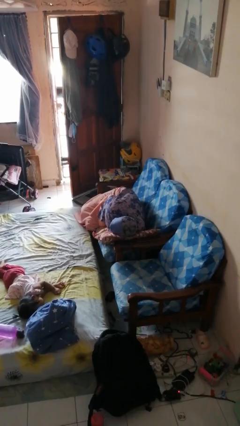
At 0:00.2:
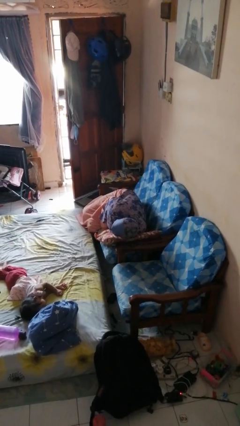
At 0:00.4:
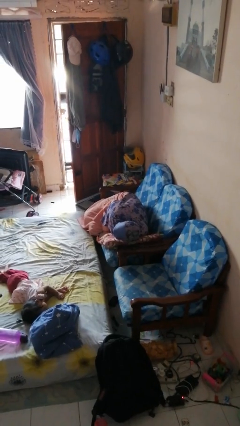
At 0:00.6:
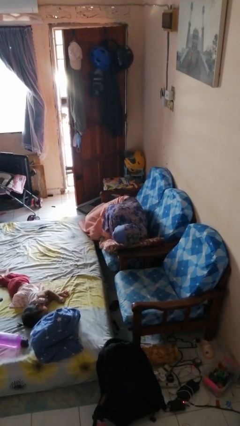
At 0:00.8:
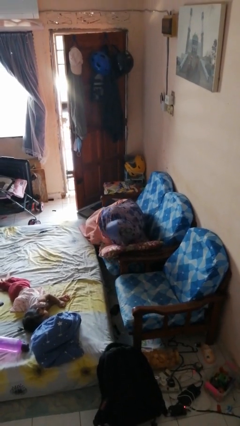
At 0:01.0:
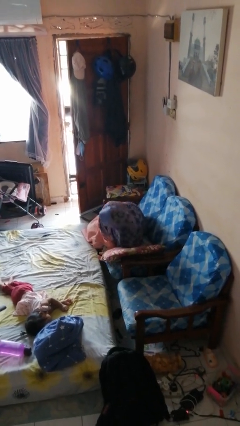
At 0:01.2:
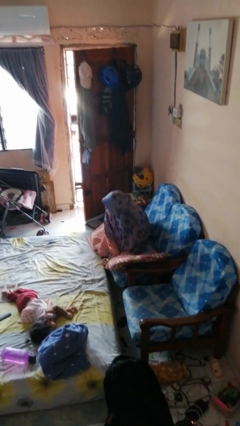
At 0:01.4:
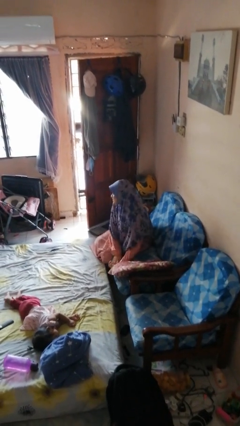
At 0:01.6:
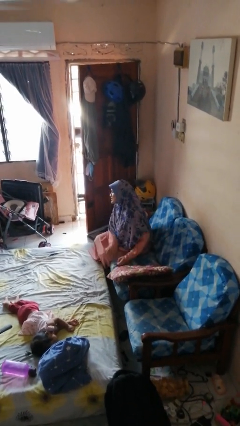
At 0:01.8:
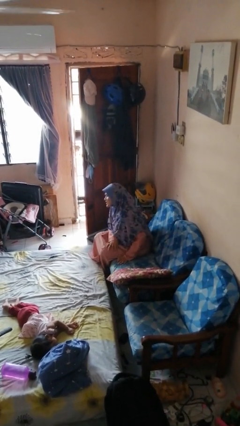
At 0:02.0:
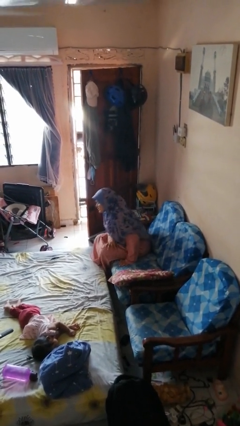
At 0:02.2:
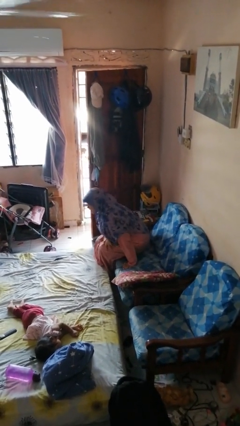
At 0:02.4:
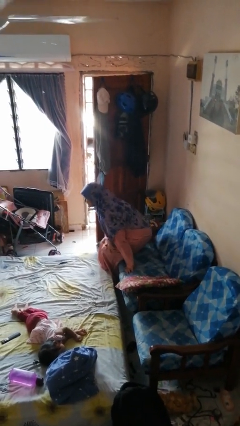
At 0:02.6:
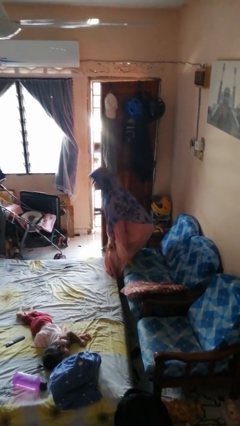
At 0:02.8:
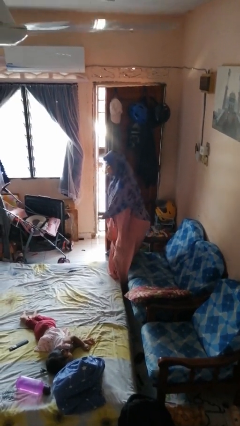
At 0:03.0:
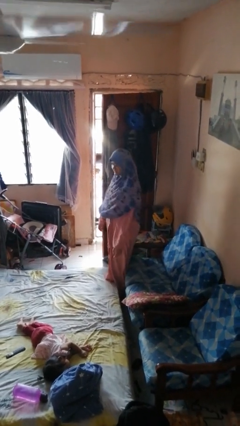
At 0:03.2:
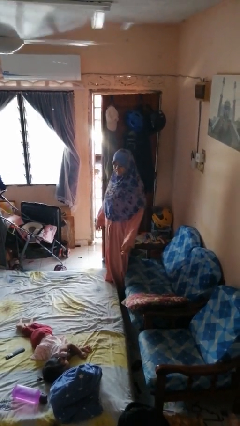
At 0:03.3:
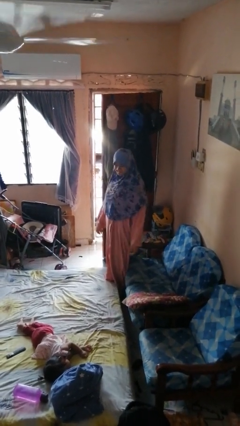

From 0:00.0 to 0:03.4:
person stands up

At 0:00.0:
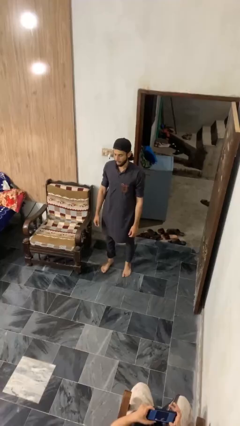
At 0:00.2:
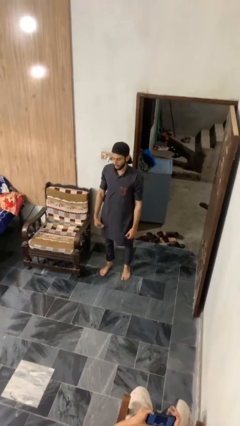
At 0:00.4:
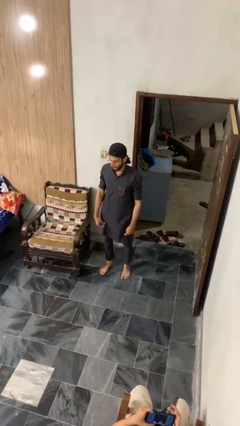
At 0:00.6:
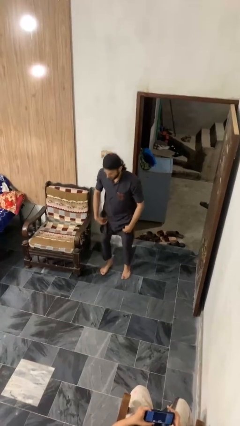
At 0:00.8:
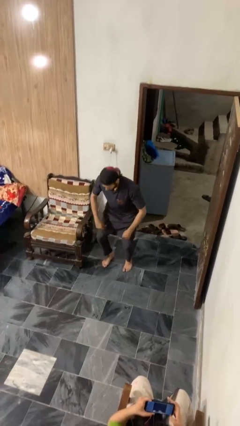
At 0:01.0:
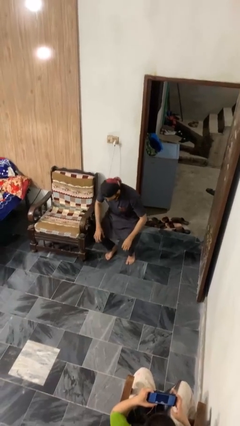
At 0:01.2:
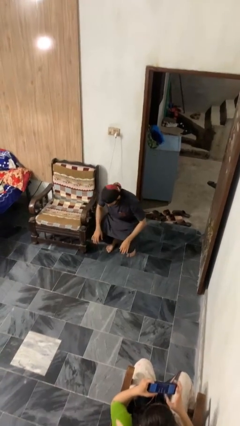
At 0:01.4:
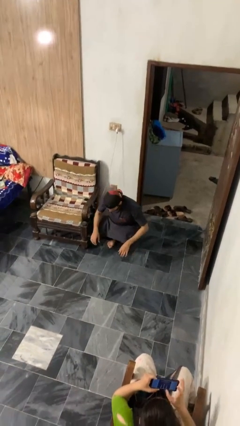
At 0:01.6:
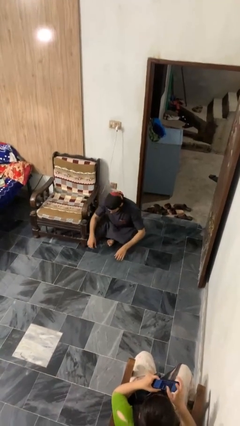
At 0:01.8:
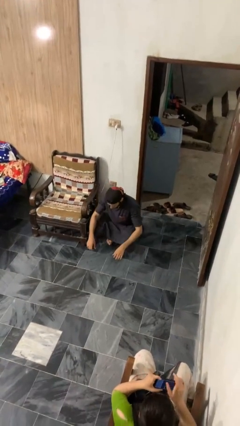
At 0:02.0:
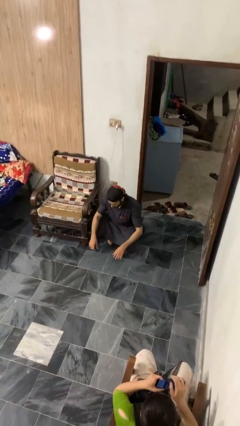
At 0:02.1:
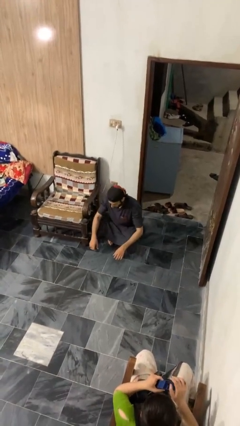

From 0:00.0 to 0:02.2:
person squats

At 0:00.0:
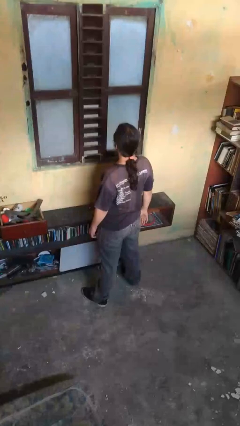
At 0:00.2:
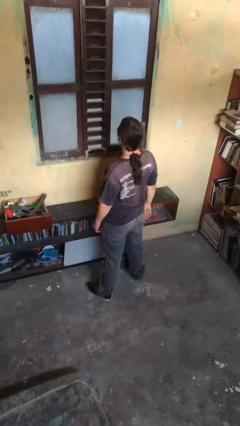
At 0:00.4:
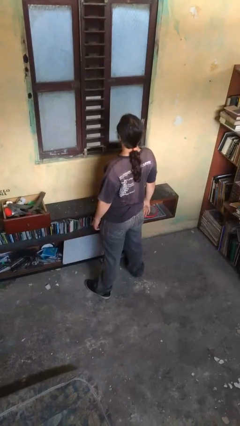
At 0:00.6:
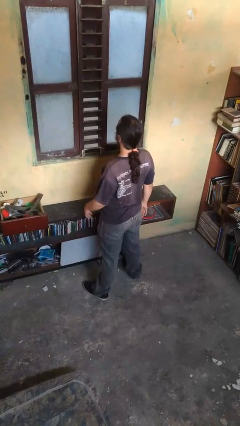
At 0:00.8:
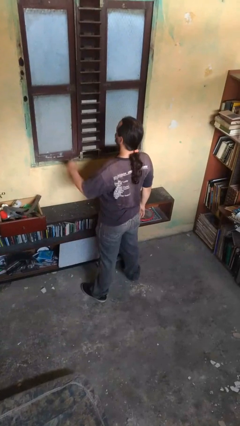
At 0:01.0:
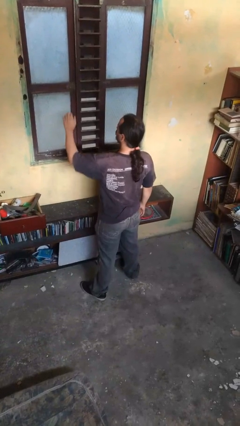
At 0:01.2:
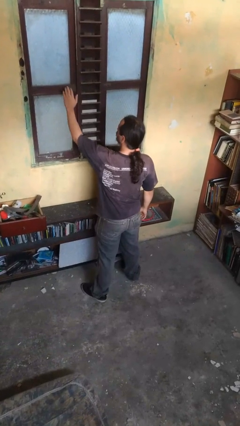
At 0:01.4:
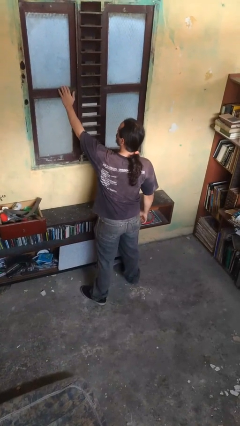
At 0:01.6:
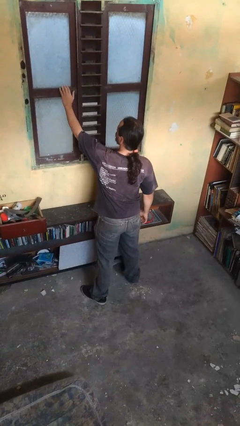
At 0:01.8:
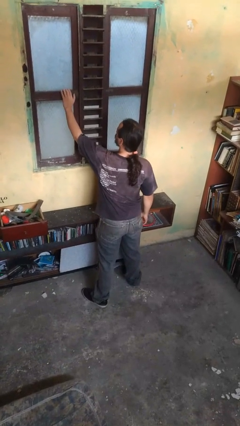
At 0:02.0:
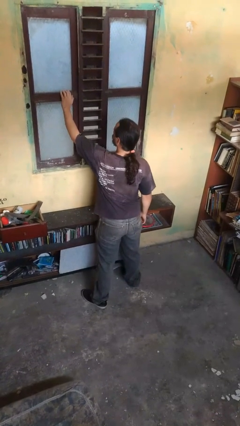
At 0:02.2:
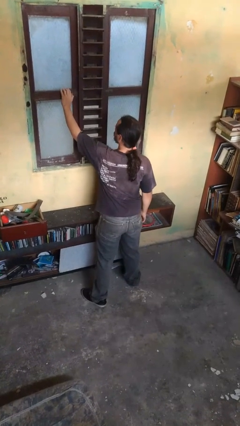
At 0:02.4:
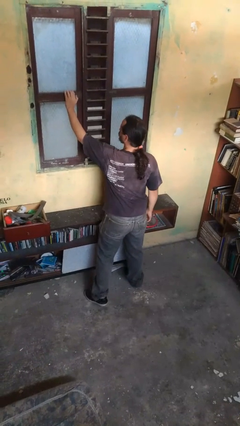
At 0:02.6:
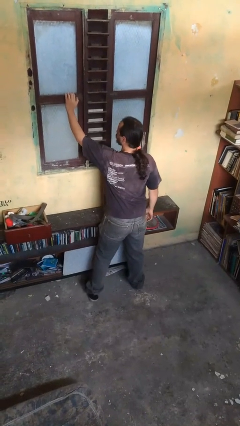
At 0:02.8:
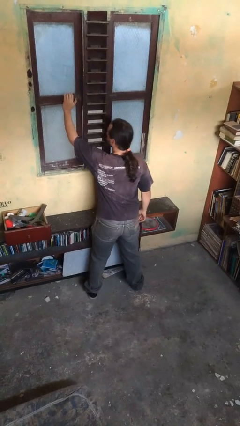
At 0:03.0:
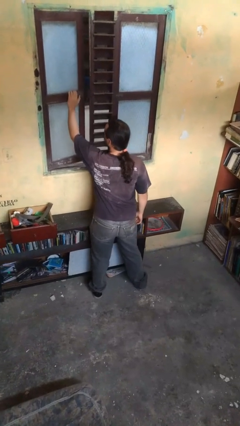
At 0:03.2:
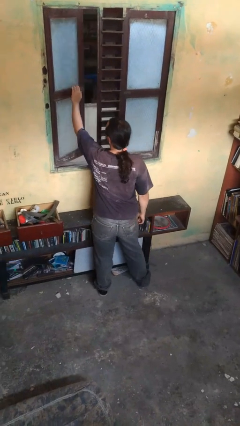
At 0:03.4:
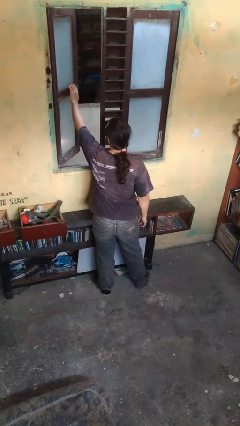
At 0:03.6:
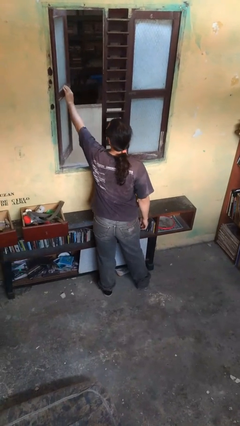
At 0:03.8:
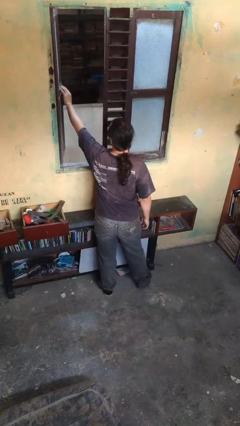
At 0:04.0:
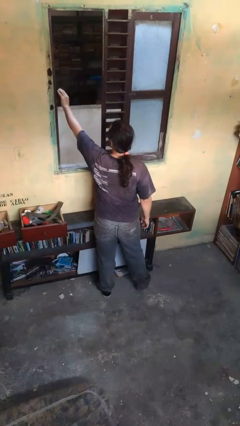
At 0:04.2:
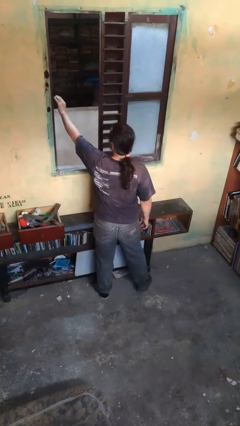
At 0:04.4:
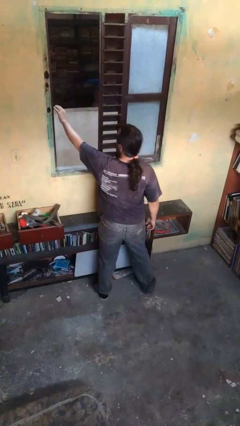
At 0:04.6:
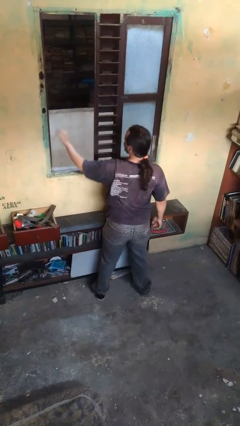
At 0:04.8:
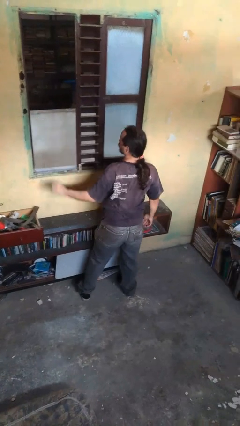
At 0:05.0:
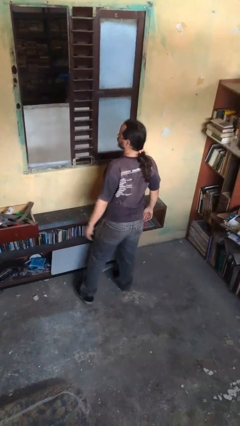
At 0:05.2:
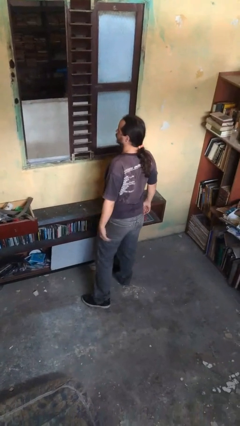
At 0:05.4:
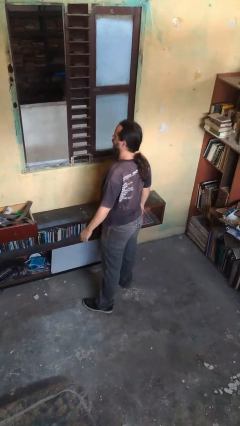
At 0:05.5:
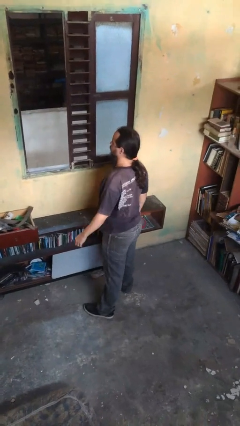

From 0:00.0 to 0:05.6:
person opens home window

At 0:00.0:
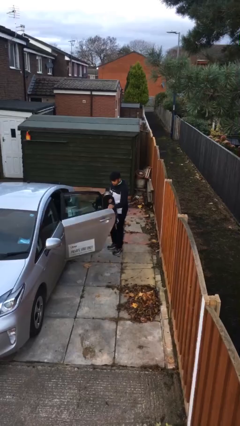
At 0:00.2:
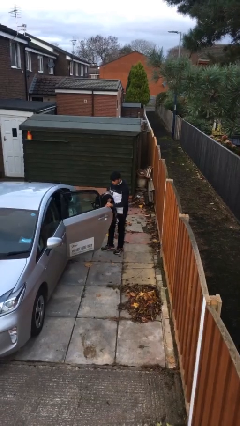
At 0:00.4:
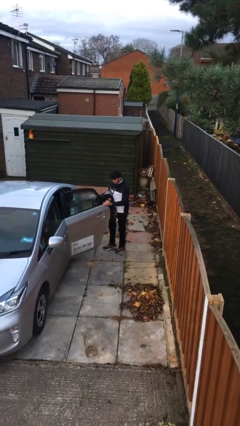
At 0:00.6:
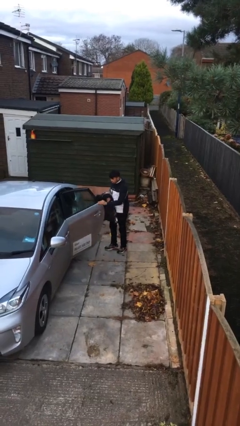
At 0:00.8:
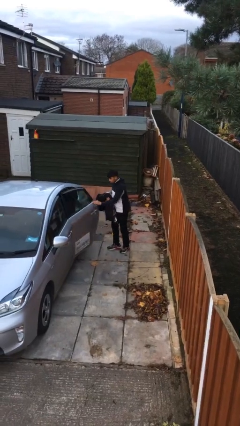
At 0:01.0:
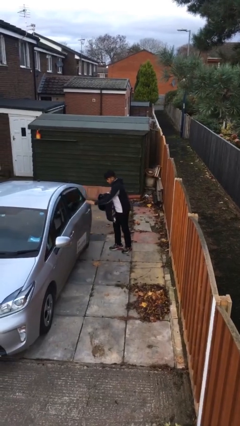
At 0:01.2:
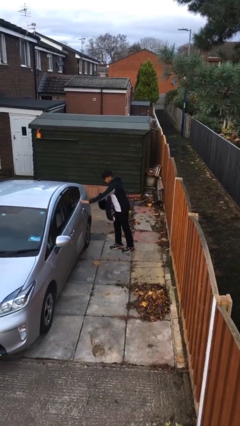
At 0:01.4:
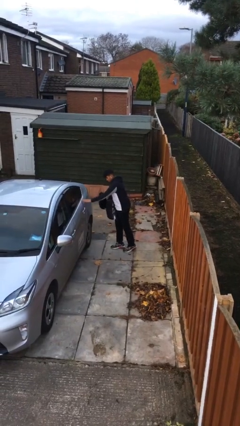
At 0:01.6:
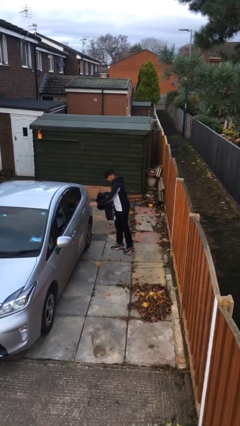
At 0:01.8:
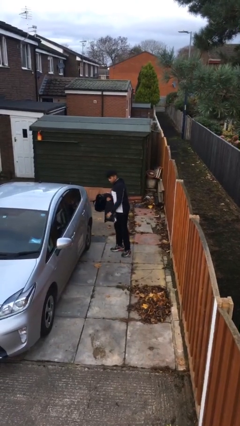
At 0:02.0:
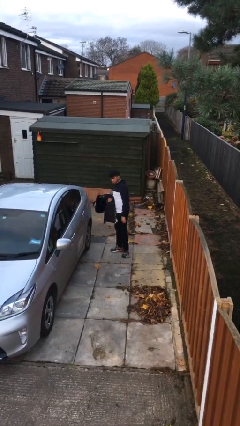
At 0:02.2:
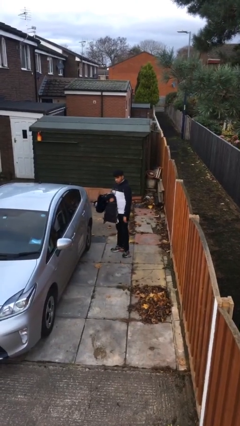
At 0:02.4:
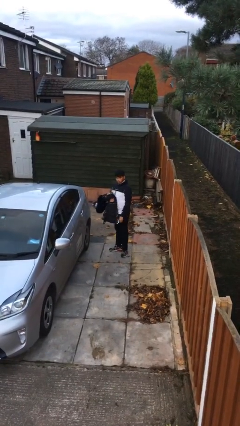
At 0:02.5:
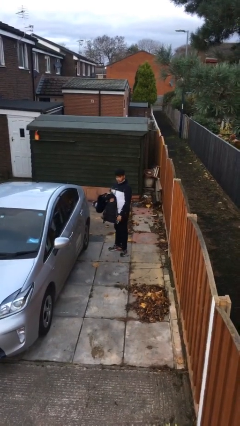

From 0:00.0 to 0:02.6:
person closes car door

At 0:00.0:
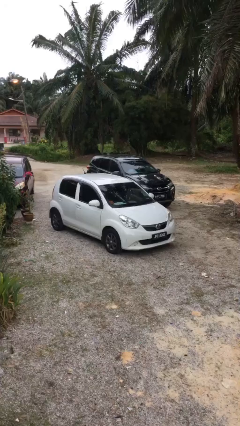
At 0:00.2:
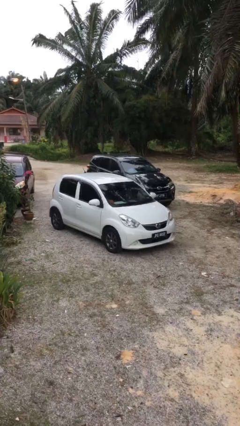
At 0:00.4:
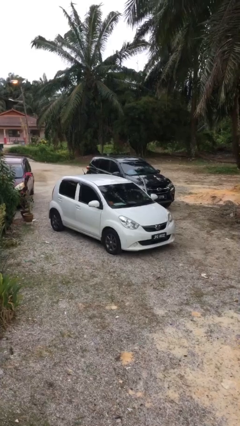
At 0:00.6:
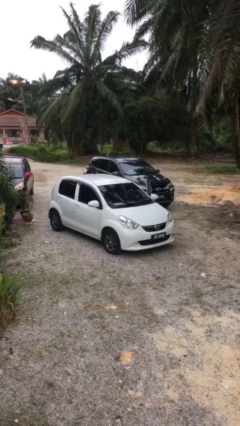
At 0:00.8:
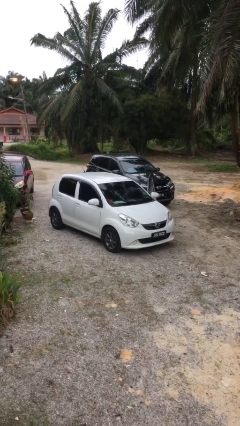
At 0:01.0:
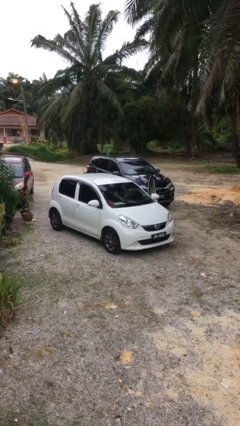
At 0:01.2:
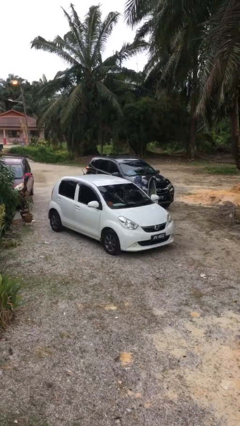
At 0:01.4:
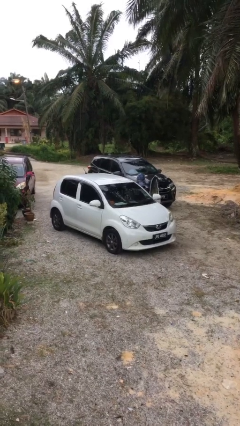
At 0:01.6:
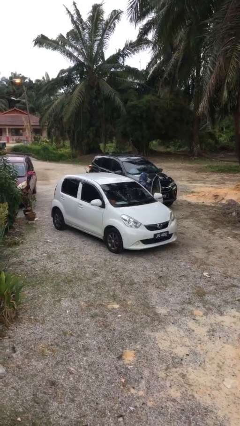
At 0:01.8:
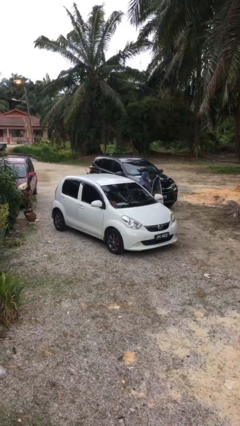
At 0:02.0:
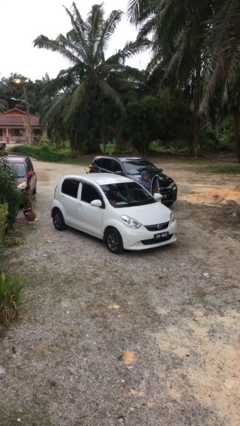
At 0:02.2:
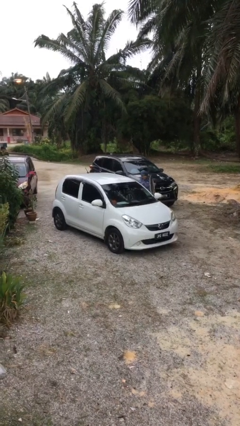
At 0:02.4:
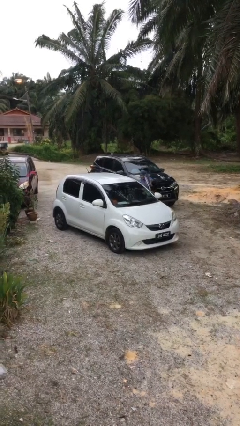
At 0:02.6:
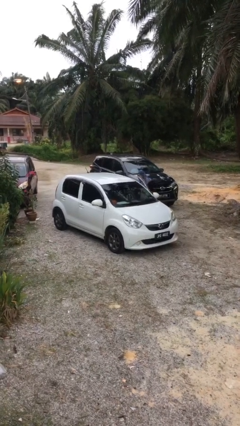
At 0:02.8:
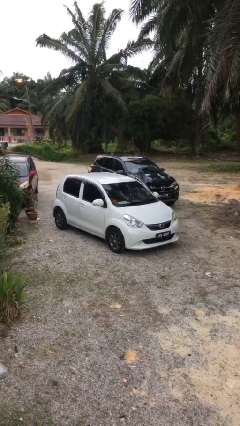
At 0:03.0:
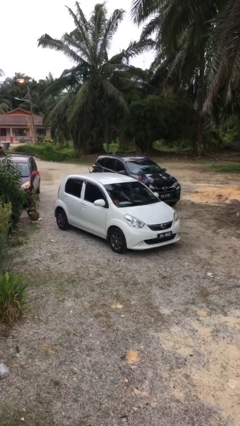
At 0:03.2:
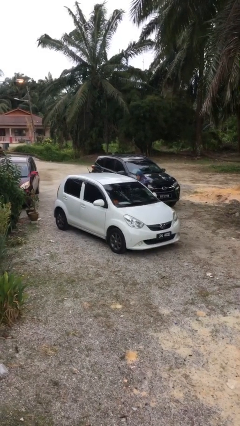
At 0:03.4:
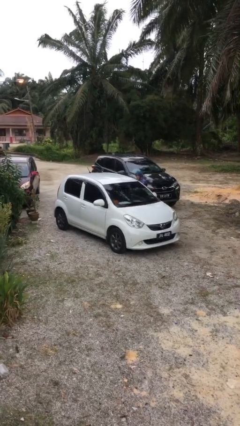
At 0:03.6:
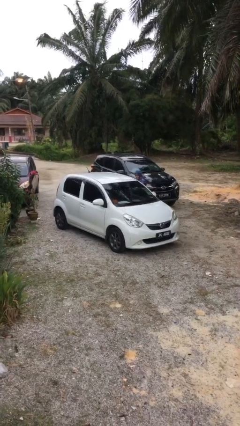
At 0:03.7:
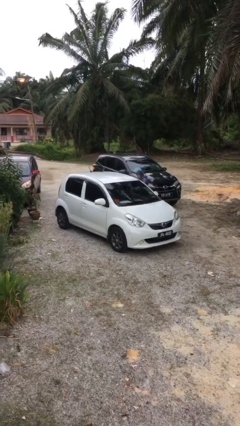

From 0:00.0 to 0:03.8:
car drops off person
